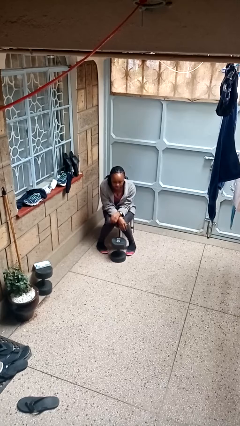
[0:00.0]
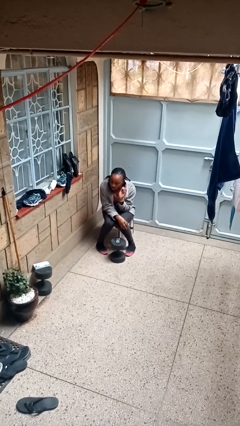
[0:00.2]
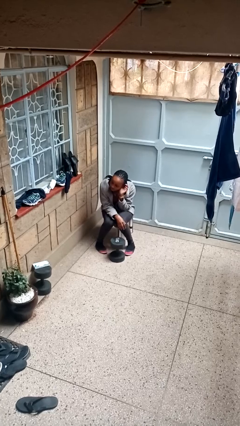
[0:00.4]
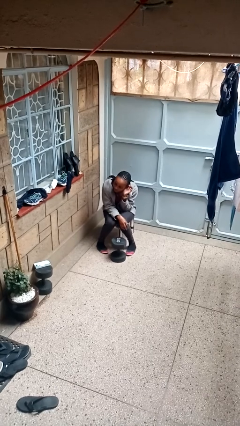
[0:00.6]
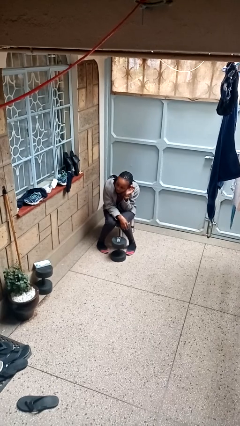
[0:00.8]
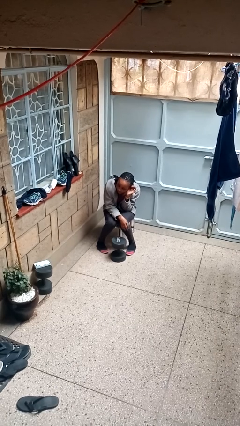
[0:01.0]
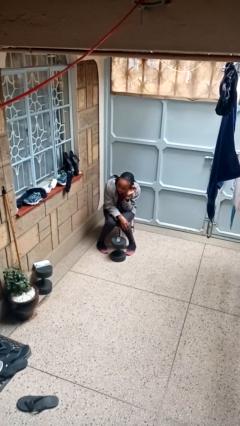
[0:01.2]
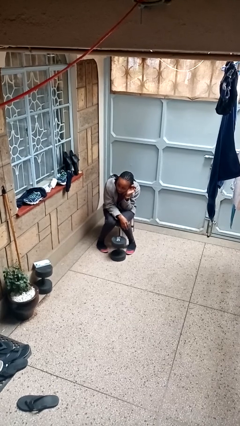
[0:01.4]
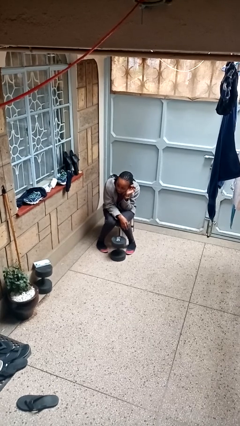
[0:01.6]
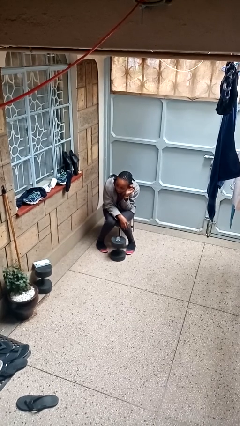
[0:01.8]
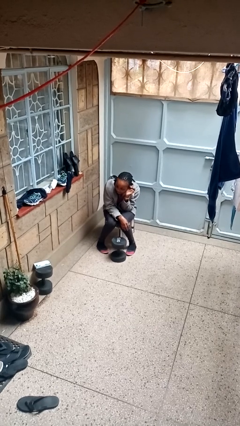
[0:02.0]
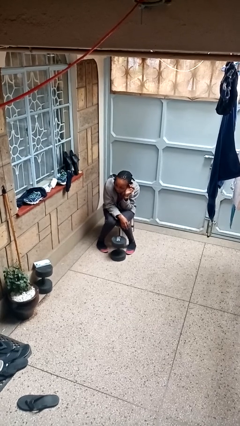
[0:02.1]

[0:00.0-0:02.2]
person gestures listen closely

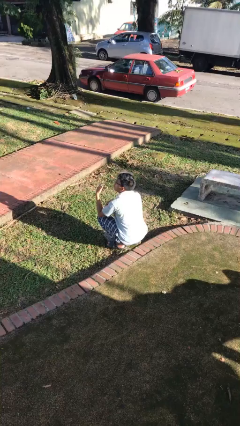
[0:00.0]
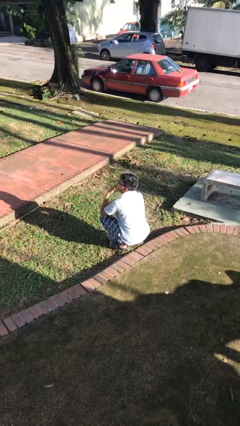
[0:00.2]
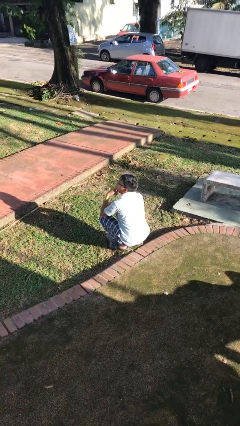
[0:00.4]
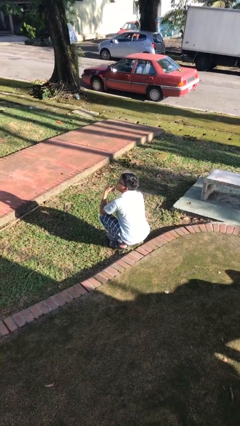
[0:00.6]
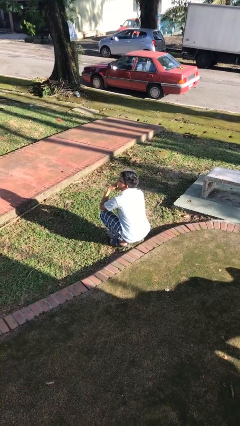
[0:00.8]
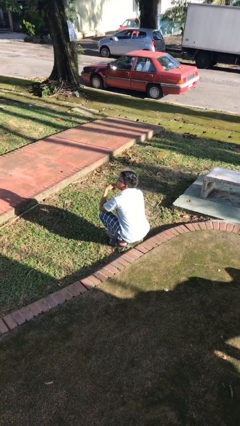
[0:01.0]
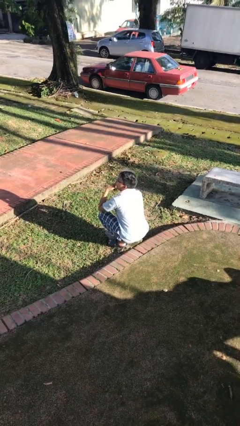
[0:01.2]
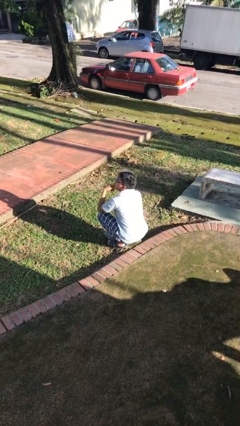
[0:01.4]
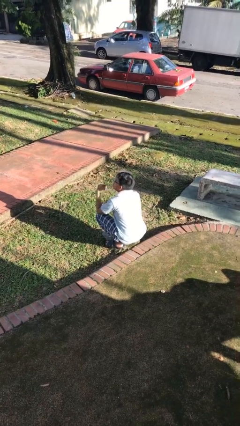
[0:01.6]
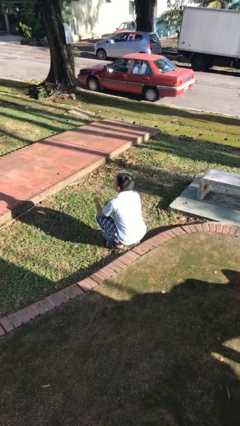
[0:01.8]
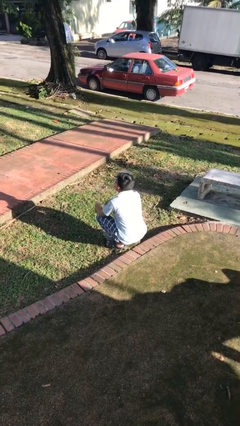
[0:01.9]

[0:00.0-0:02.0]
person strokes chin

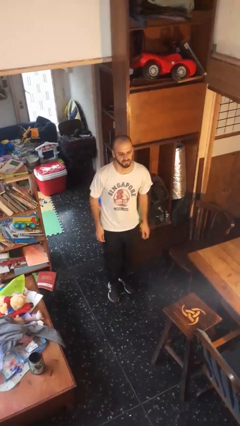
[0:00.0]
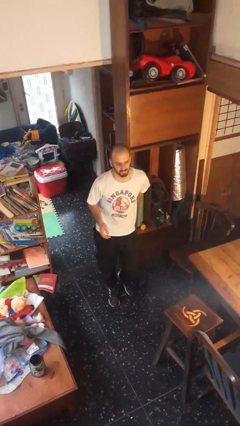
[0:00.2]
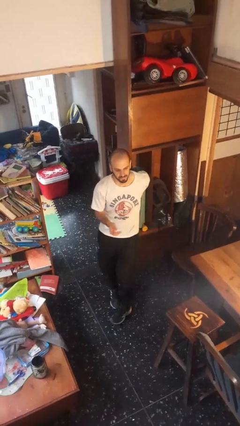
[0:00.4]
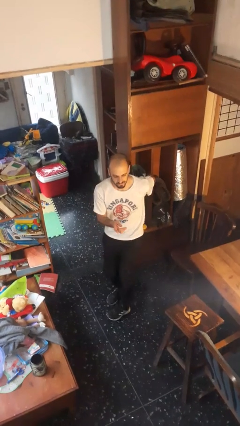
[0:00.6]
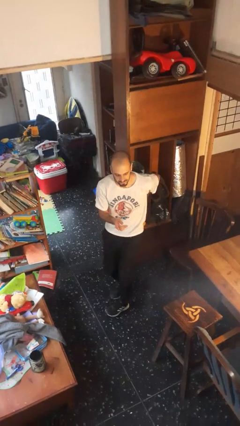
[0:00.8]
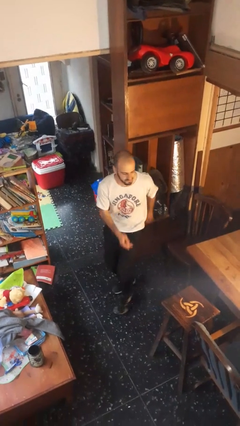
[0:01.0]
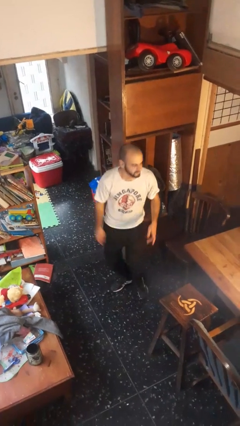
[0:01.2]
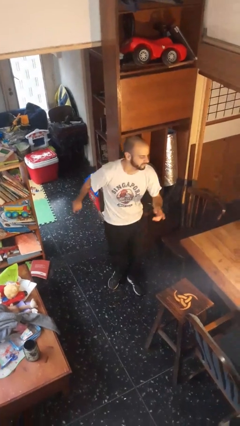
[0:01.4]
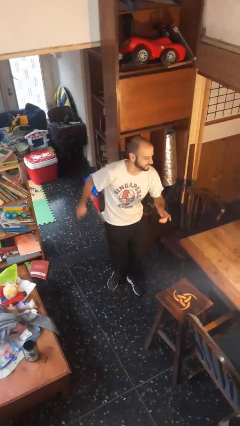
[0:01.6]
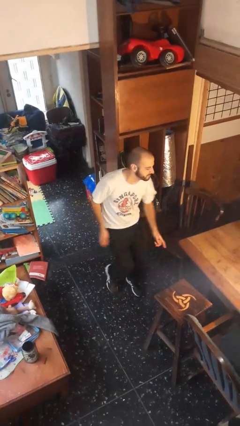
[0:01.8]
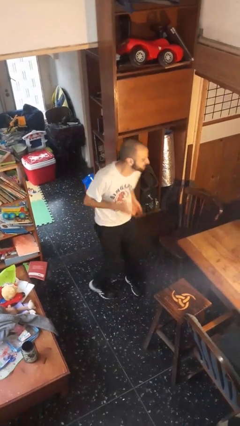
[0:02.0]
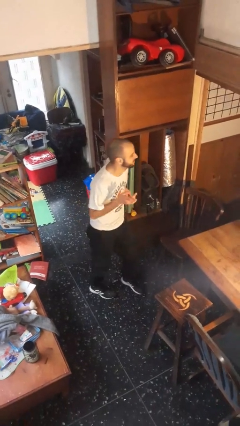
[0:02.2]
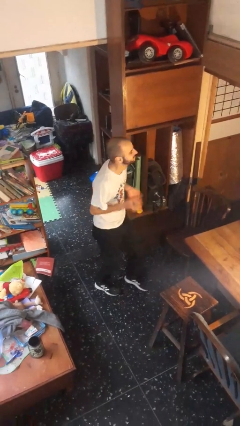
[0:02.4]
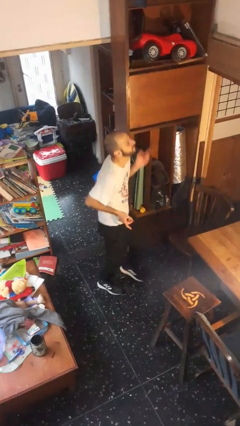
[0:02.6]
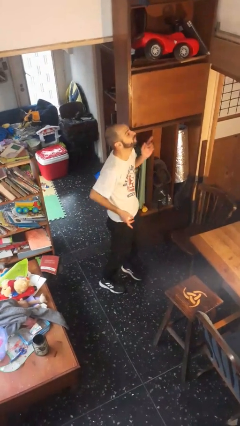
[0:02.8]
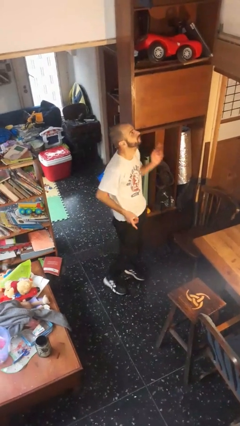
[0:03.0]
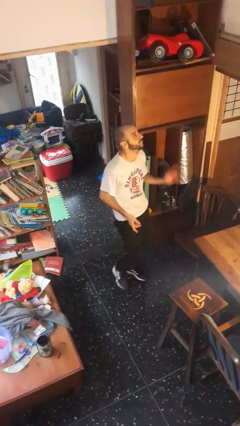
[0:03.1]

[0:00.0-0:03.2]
person dances in place

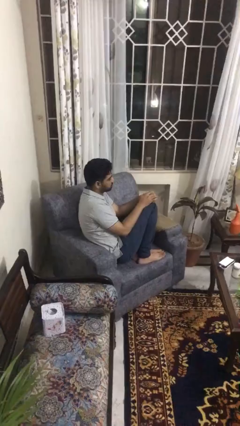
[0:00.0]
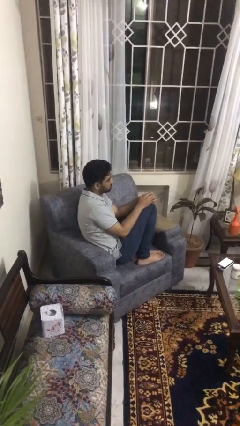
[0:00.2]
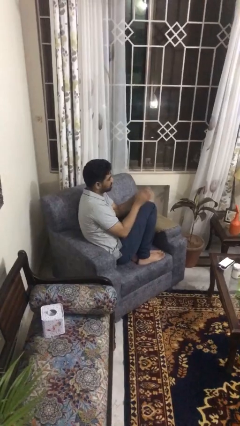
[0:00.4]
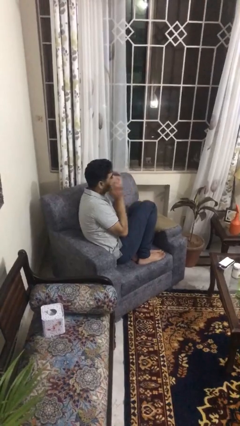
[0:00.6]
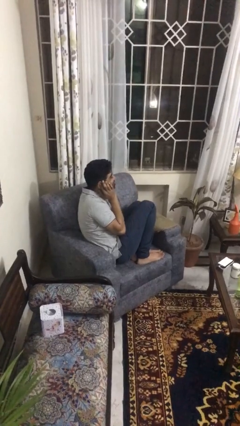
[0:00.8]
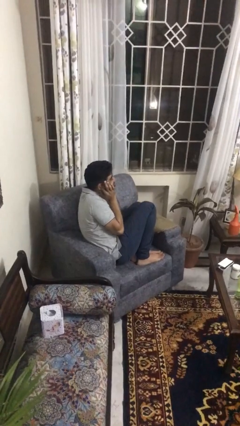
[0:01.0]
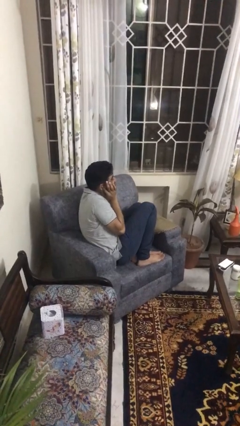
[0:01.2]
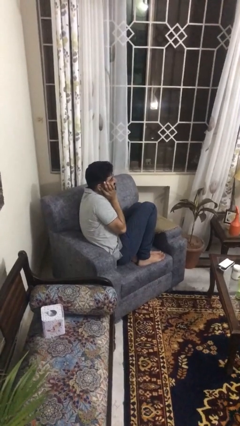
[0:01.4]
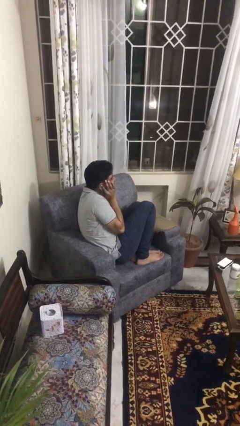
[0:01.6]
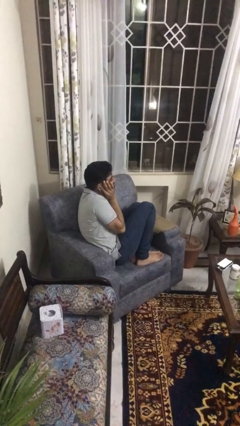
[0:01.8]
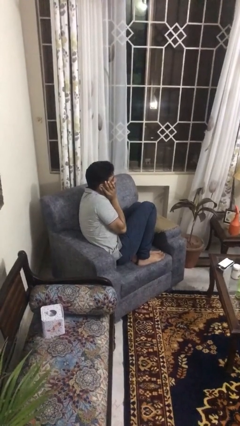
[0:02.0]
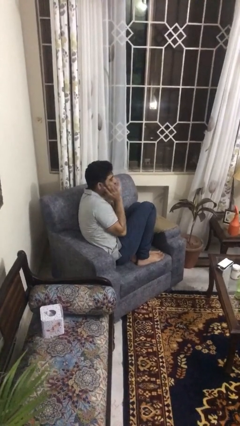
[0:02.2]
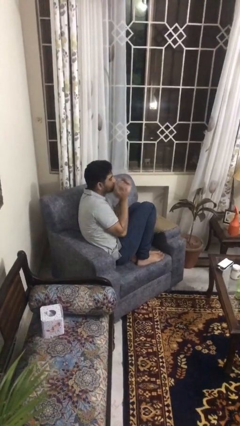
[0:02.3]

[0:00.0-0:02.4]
person puts fingers in ear

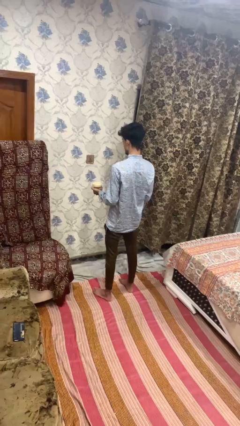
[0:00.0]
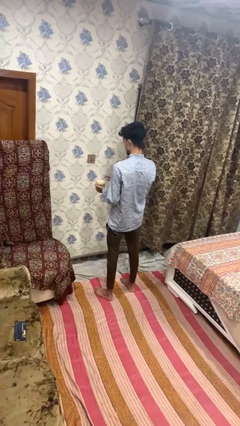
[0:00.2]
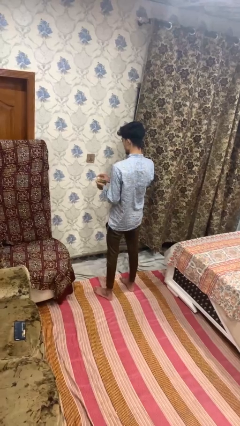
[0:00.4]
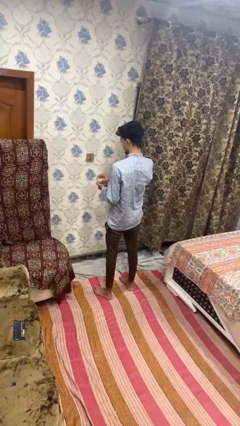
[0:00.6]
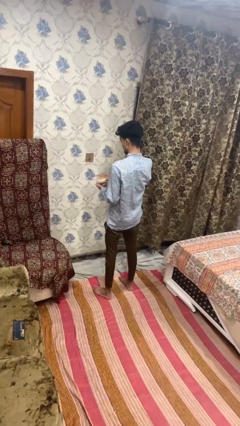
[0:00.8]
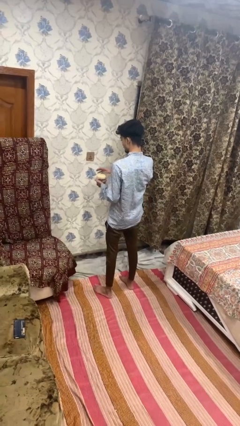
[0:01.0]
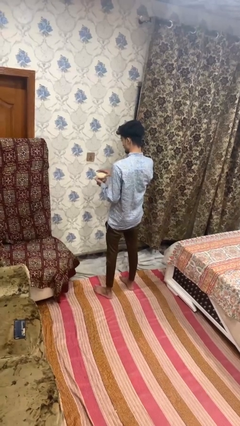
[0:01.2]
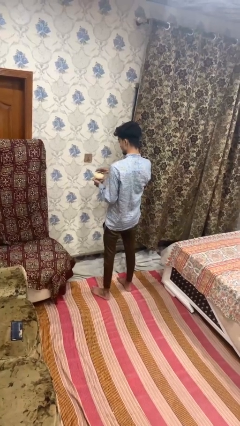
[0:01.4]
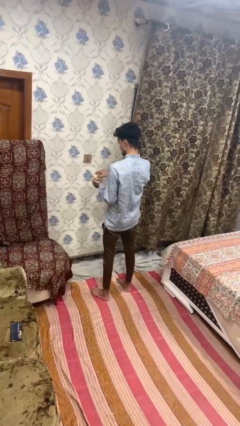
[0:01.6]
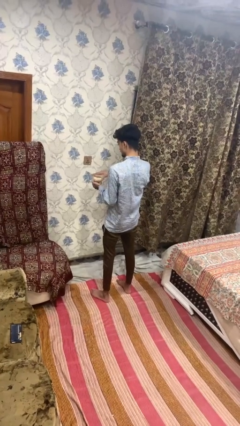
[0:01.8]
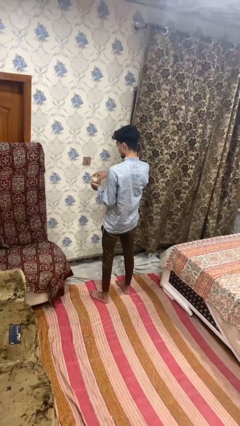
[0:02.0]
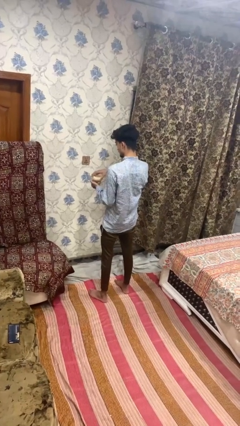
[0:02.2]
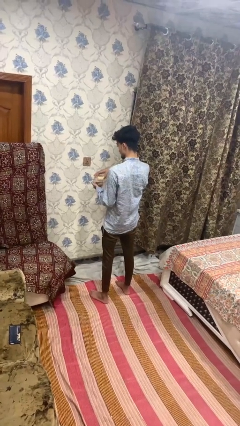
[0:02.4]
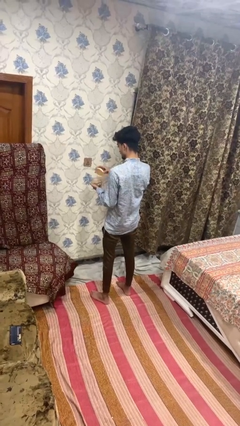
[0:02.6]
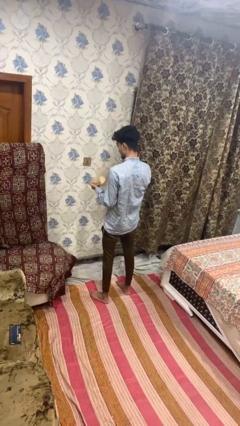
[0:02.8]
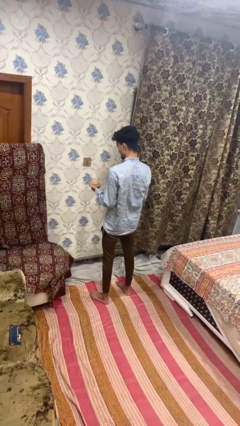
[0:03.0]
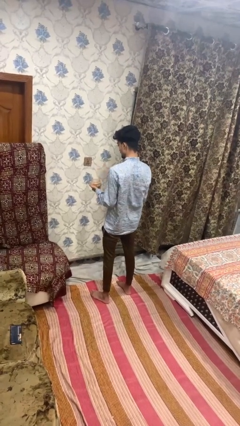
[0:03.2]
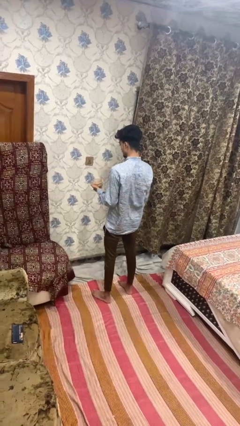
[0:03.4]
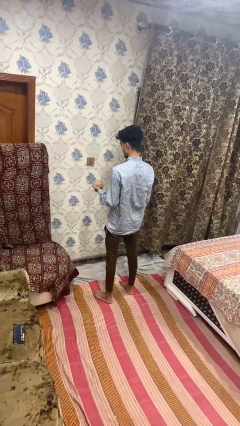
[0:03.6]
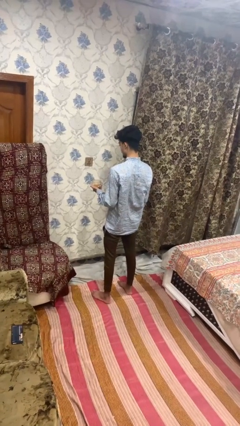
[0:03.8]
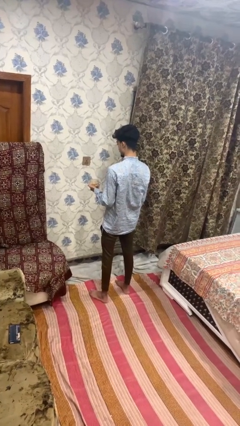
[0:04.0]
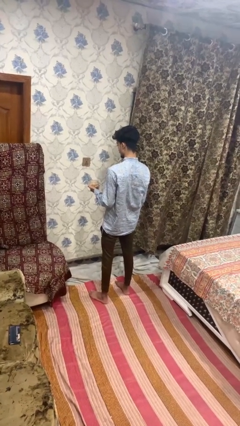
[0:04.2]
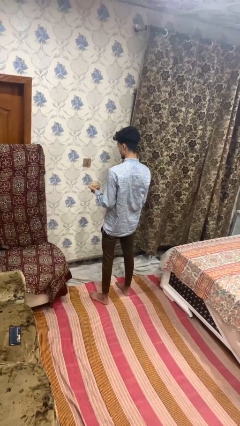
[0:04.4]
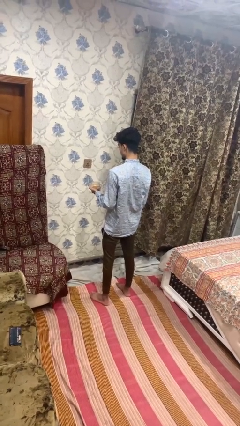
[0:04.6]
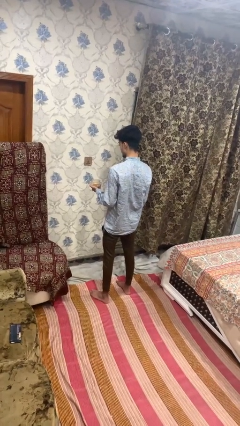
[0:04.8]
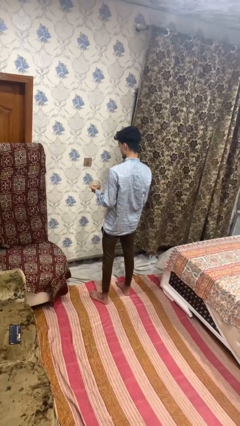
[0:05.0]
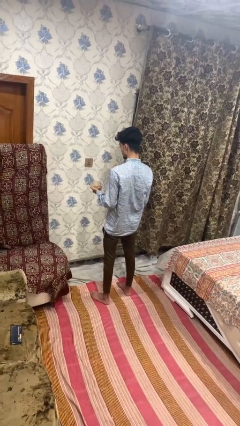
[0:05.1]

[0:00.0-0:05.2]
person opens jar

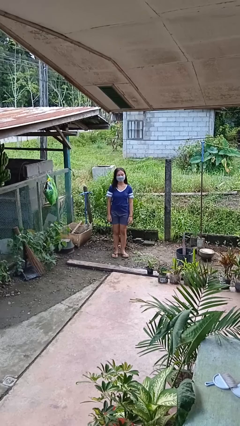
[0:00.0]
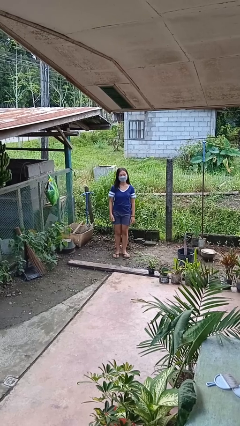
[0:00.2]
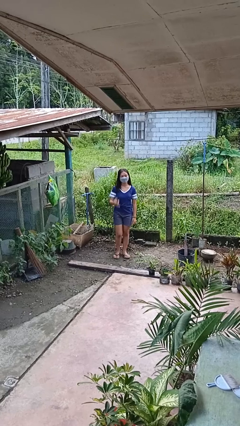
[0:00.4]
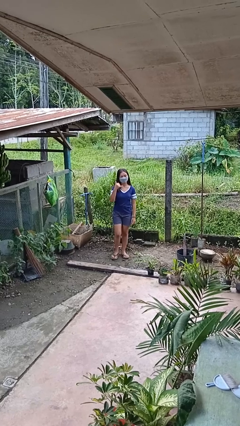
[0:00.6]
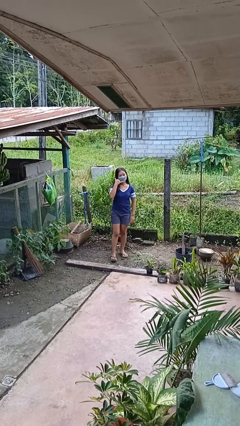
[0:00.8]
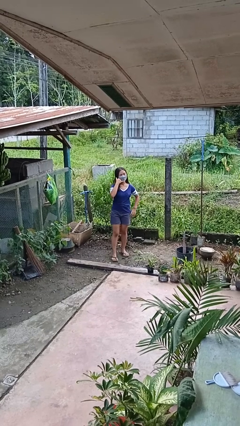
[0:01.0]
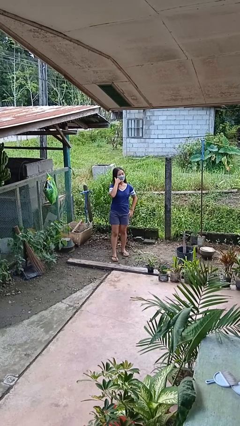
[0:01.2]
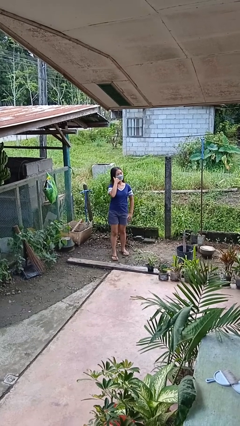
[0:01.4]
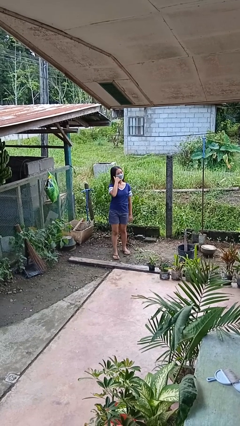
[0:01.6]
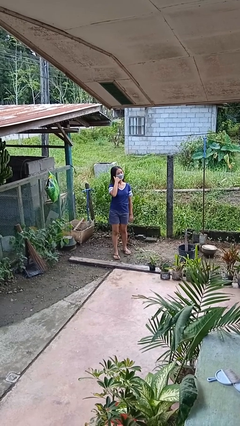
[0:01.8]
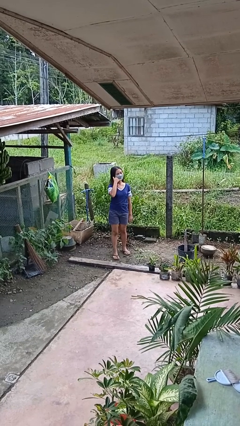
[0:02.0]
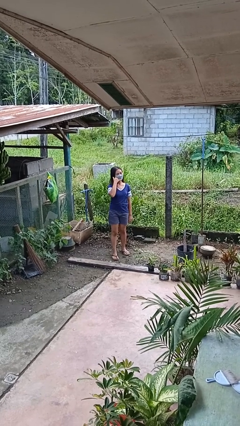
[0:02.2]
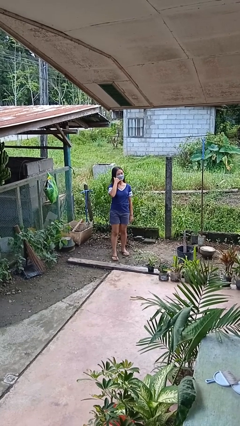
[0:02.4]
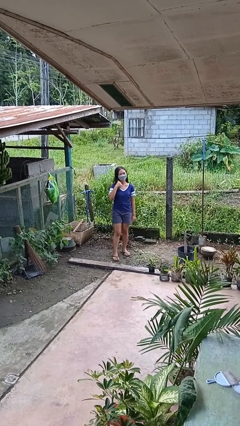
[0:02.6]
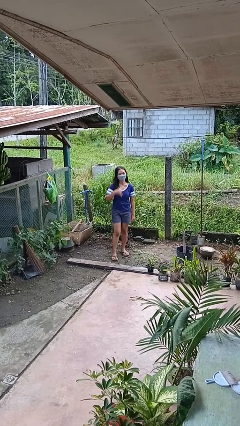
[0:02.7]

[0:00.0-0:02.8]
person gestures call me
